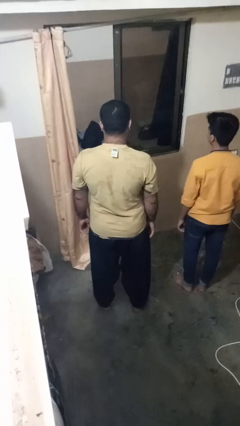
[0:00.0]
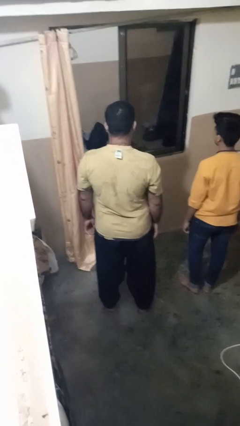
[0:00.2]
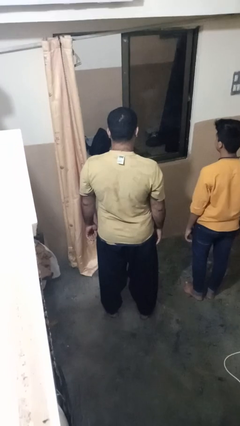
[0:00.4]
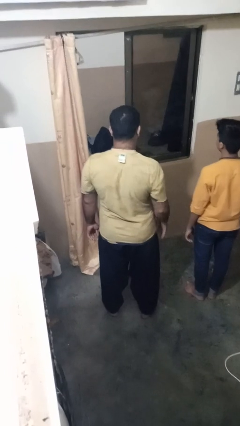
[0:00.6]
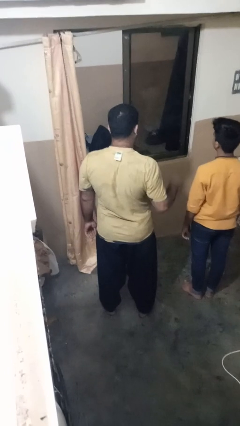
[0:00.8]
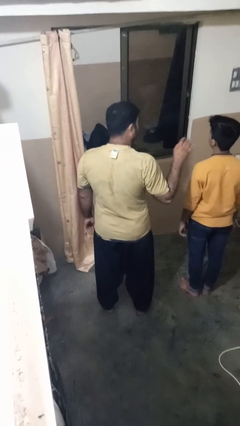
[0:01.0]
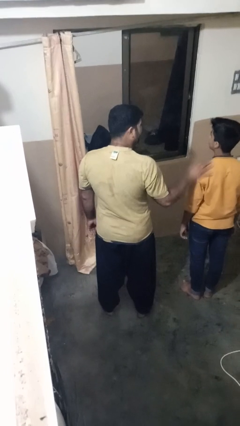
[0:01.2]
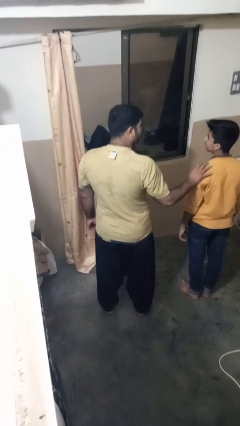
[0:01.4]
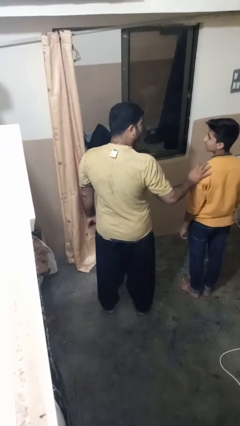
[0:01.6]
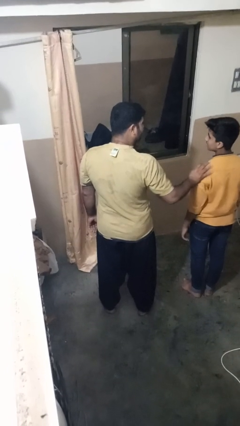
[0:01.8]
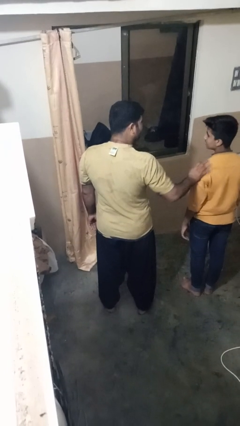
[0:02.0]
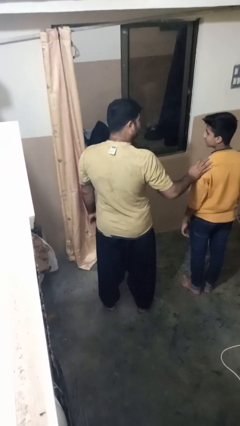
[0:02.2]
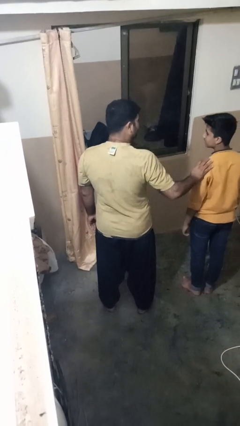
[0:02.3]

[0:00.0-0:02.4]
person pounds shoulders of person

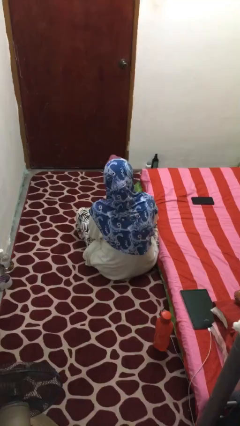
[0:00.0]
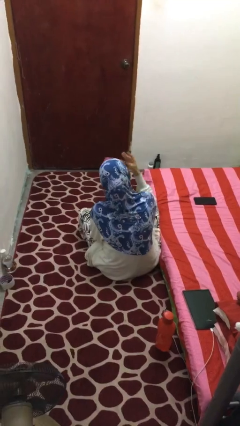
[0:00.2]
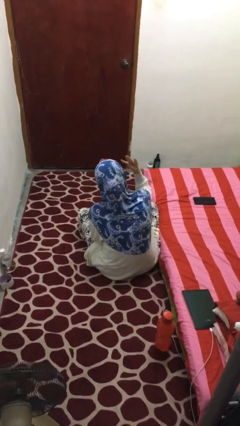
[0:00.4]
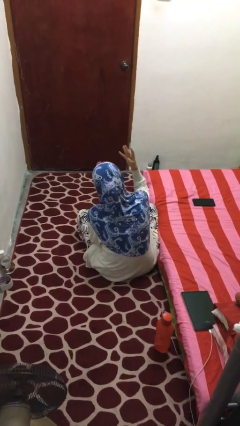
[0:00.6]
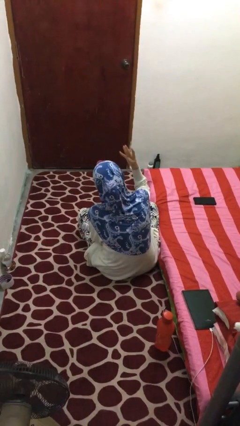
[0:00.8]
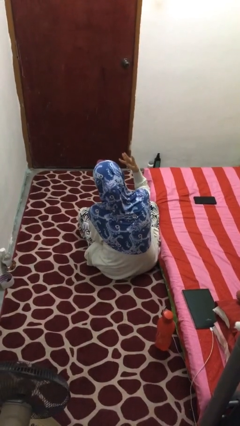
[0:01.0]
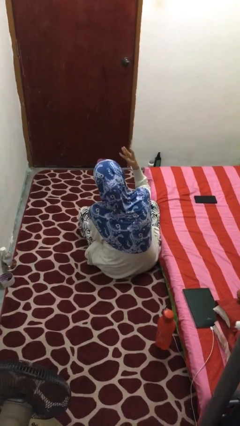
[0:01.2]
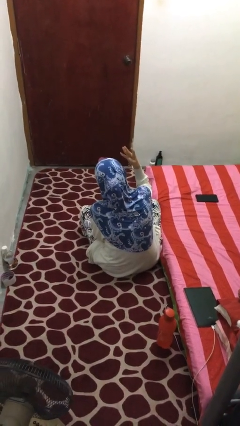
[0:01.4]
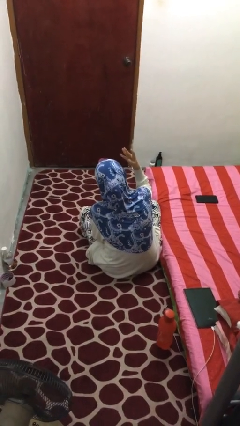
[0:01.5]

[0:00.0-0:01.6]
person gestures number four

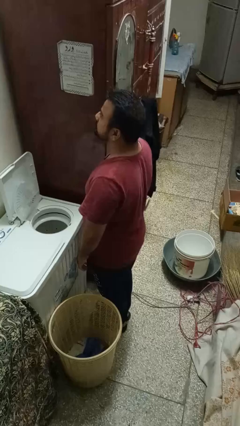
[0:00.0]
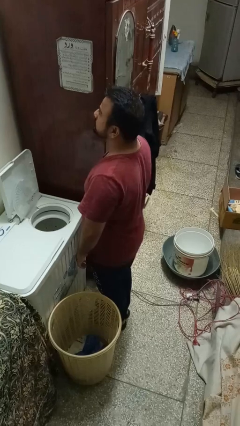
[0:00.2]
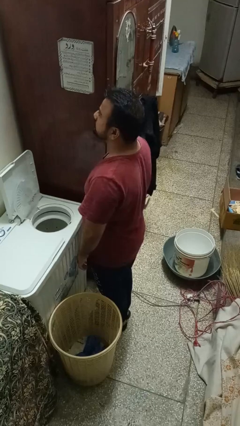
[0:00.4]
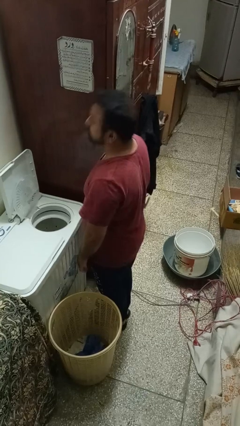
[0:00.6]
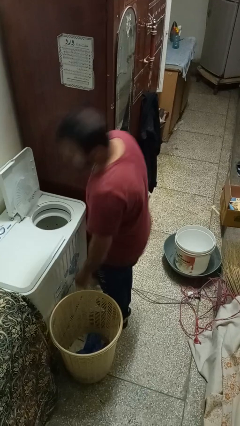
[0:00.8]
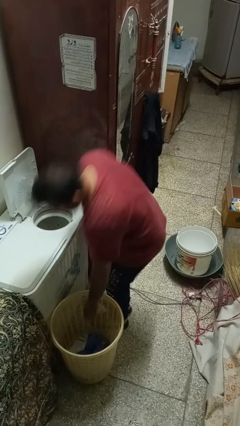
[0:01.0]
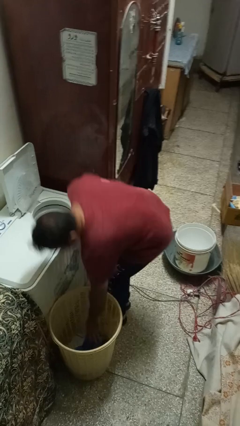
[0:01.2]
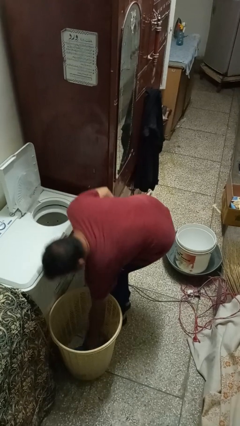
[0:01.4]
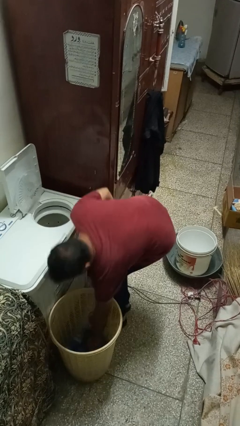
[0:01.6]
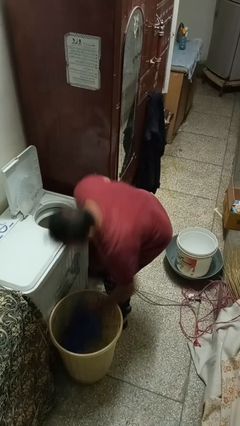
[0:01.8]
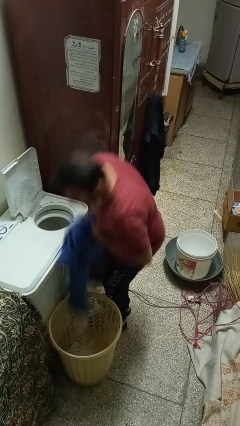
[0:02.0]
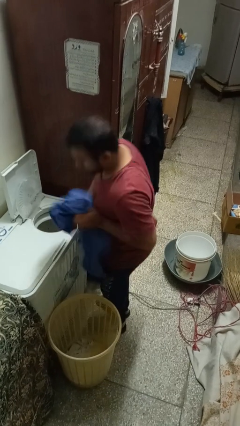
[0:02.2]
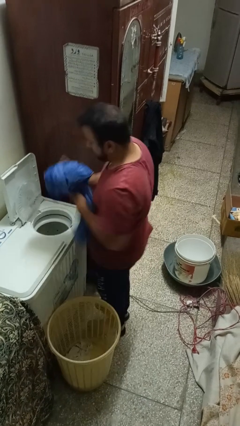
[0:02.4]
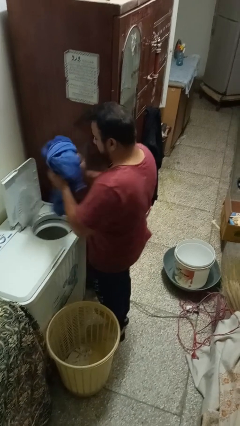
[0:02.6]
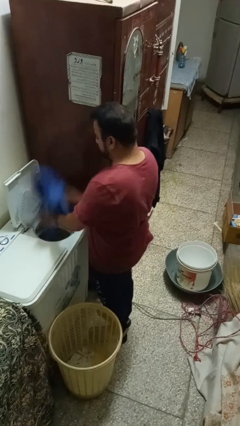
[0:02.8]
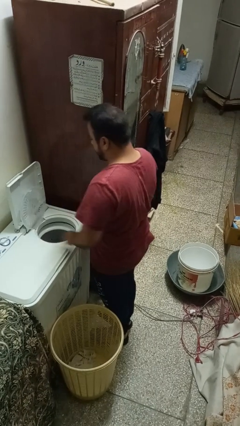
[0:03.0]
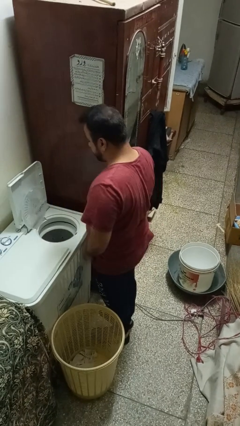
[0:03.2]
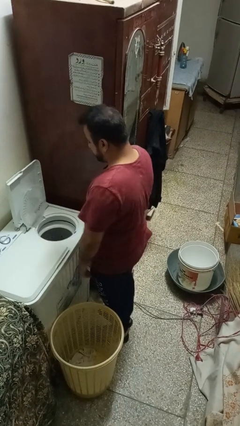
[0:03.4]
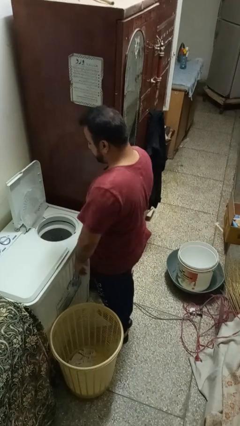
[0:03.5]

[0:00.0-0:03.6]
person loads dryer

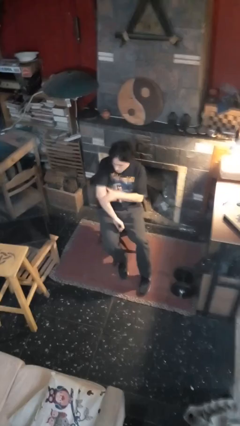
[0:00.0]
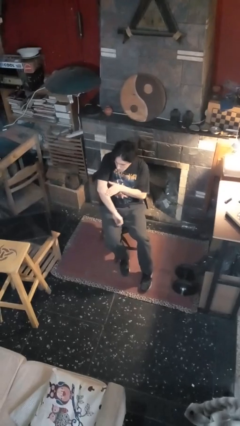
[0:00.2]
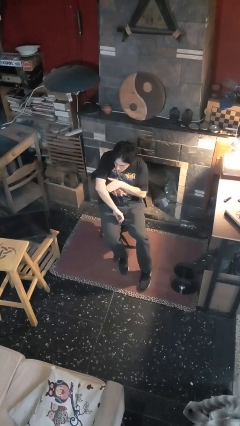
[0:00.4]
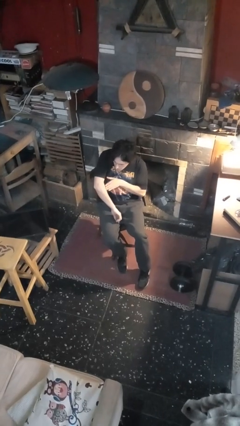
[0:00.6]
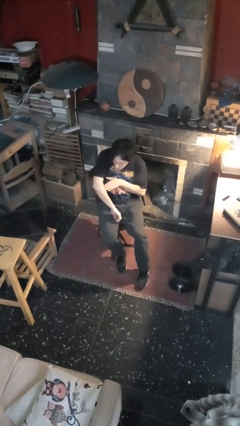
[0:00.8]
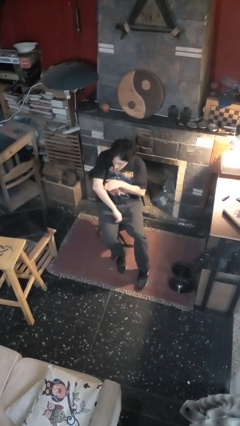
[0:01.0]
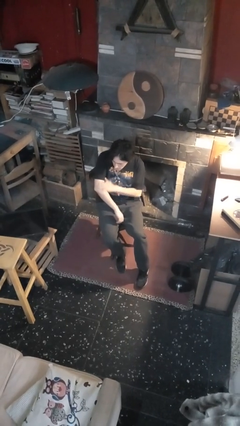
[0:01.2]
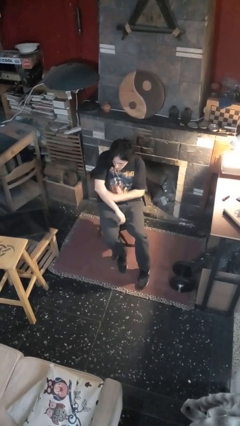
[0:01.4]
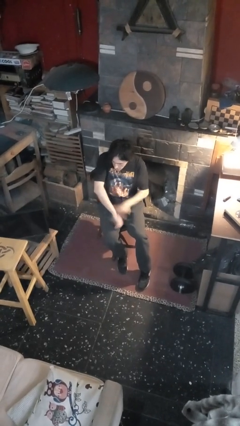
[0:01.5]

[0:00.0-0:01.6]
person swats bug

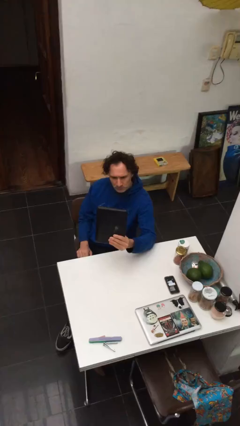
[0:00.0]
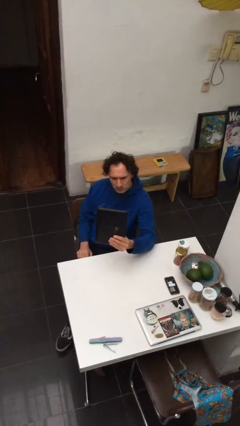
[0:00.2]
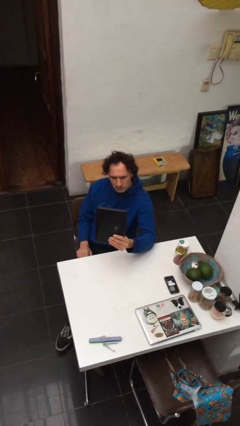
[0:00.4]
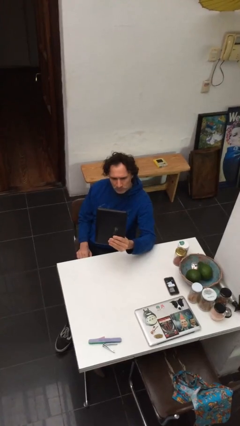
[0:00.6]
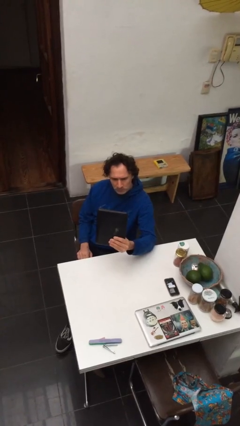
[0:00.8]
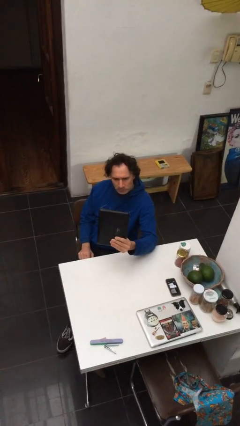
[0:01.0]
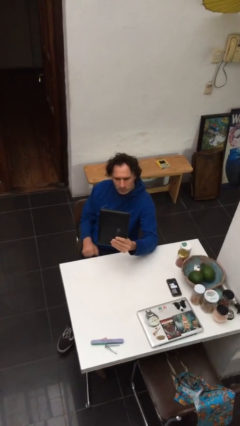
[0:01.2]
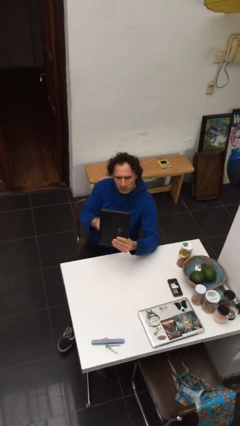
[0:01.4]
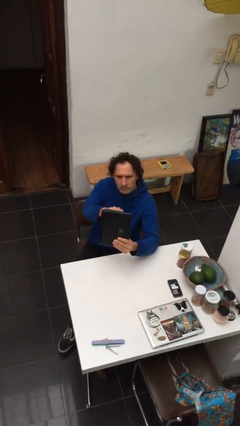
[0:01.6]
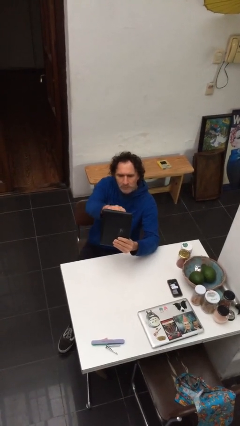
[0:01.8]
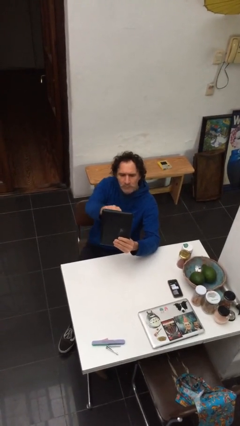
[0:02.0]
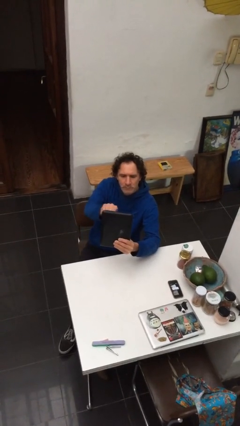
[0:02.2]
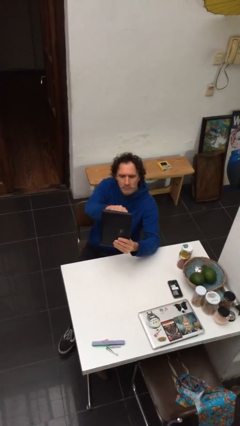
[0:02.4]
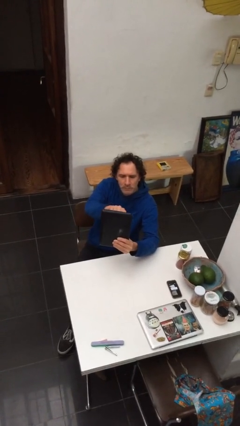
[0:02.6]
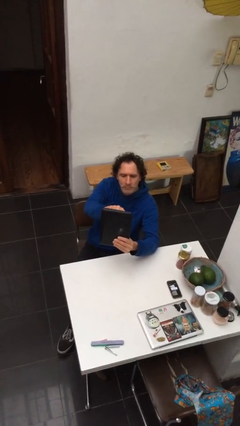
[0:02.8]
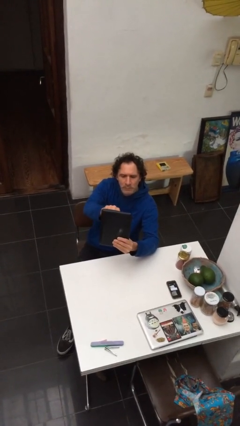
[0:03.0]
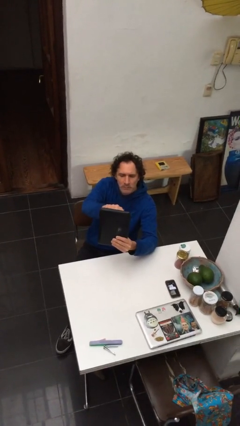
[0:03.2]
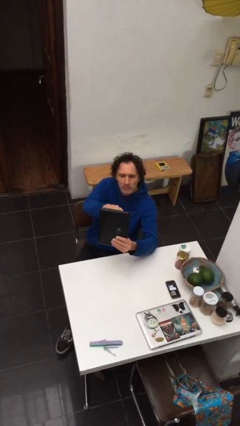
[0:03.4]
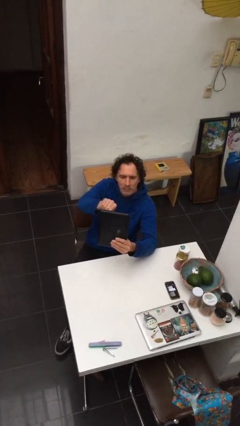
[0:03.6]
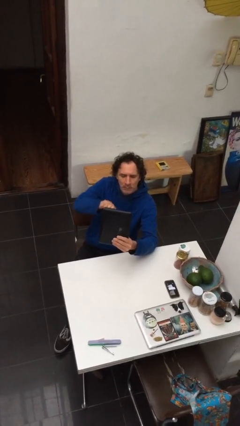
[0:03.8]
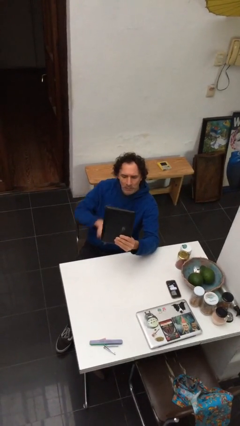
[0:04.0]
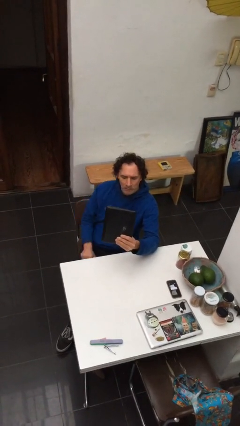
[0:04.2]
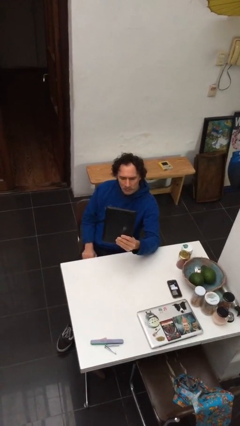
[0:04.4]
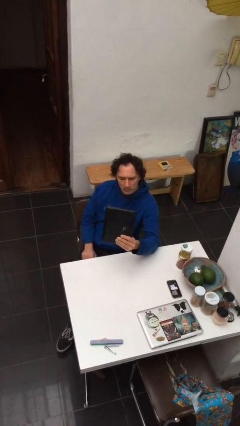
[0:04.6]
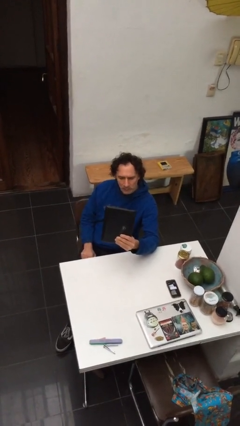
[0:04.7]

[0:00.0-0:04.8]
person interacts with tablet

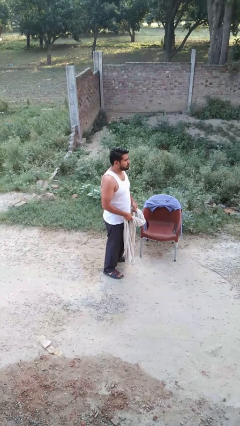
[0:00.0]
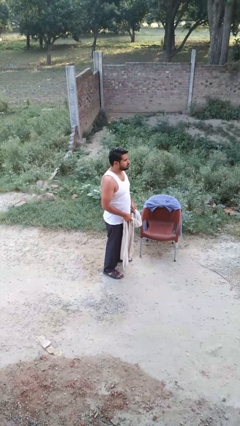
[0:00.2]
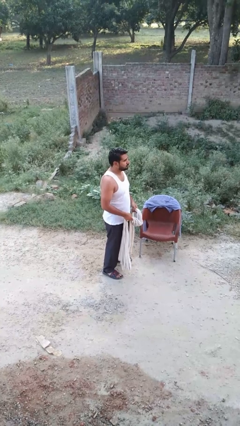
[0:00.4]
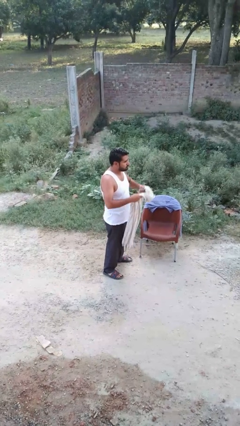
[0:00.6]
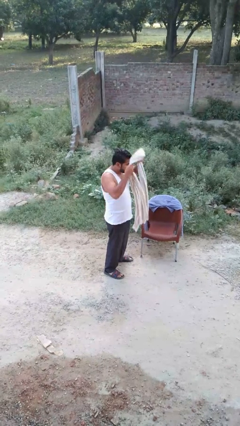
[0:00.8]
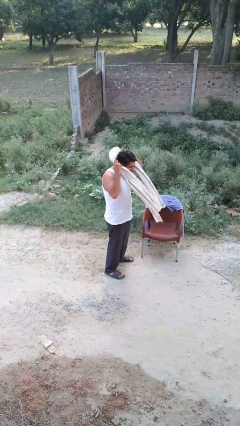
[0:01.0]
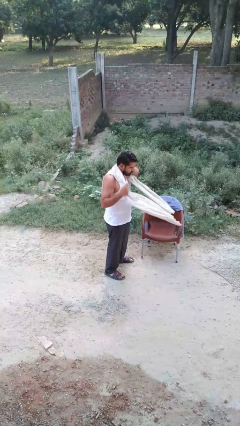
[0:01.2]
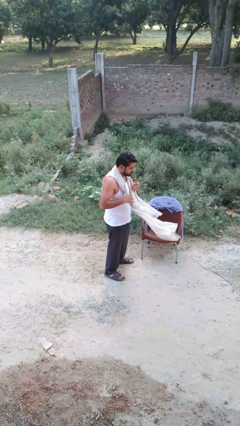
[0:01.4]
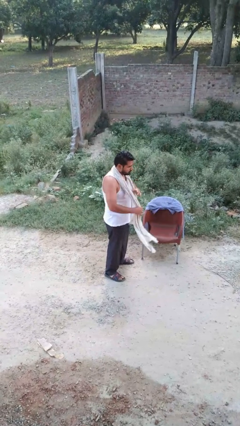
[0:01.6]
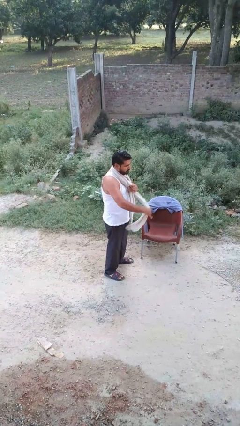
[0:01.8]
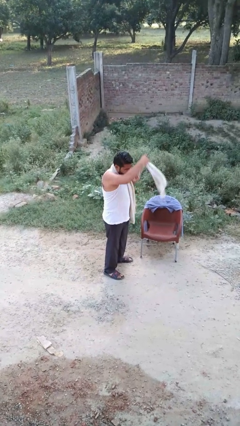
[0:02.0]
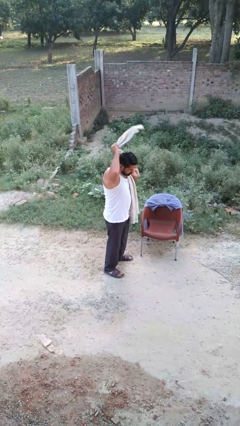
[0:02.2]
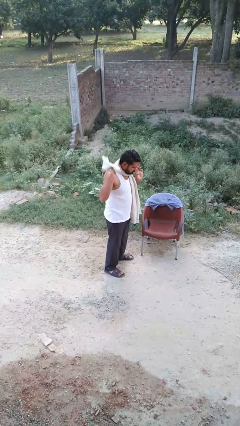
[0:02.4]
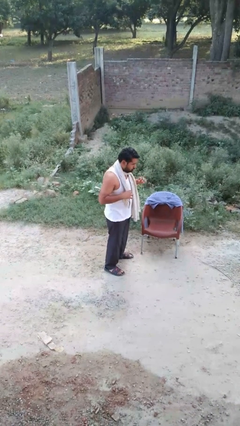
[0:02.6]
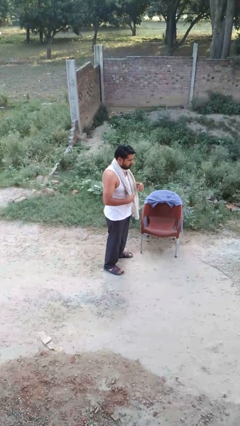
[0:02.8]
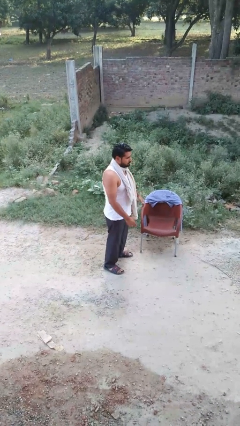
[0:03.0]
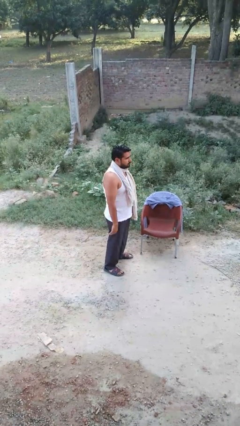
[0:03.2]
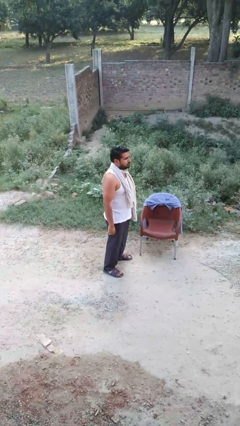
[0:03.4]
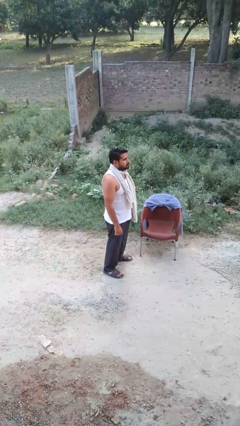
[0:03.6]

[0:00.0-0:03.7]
person puts on scarf
